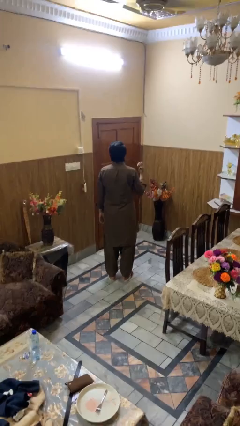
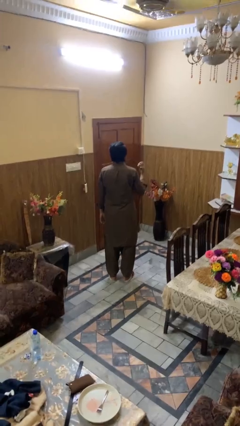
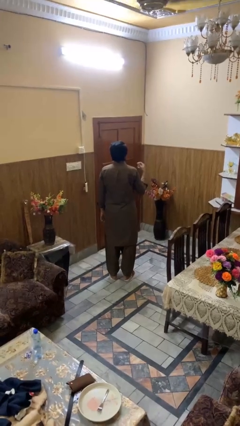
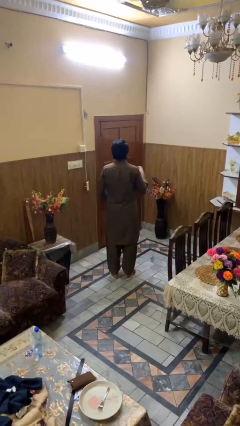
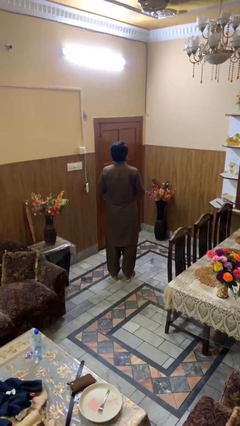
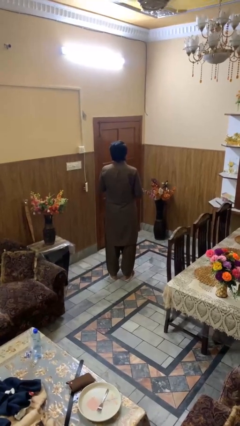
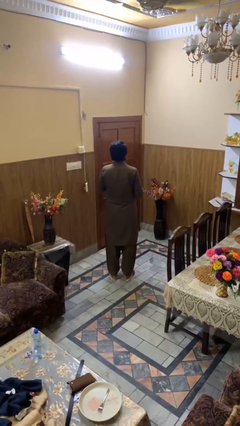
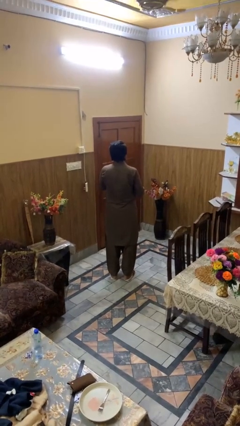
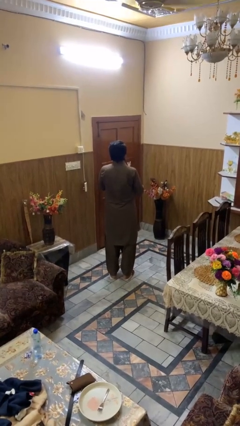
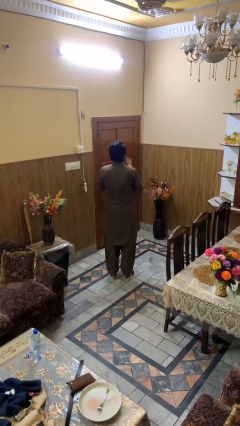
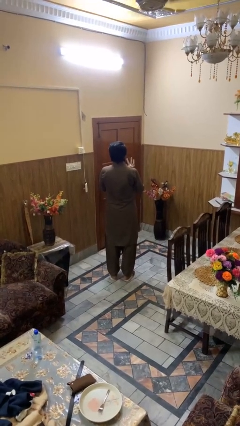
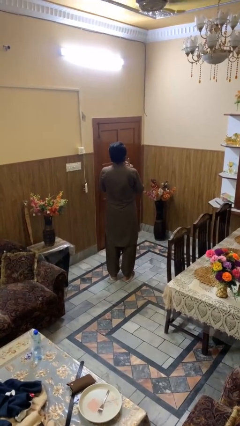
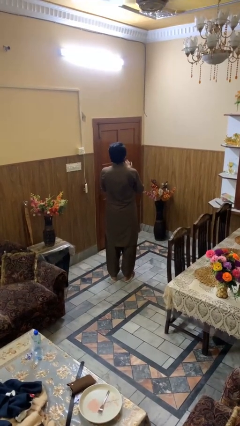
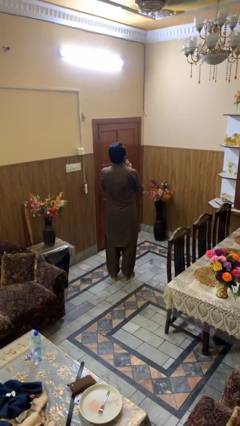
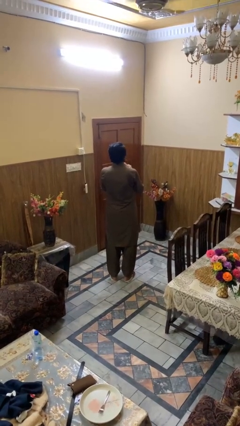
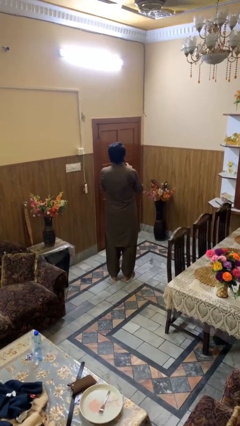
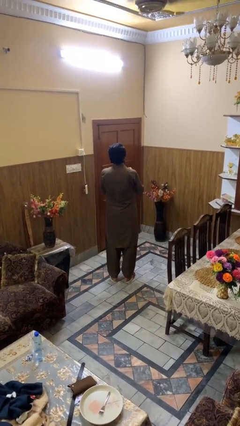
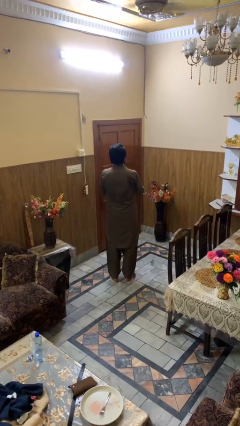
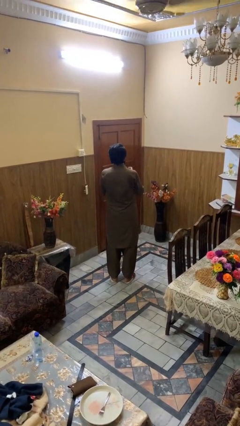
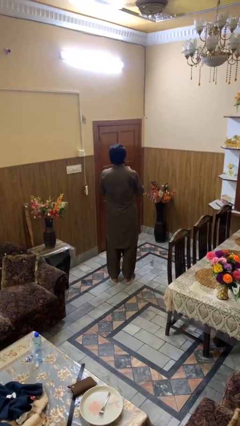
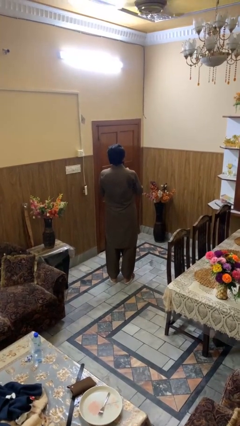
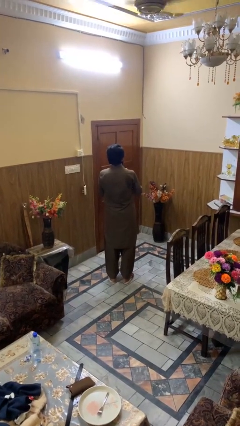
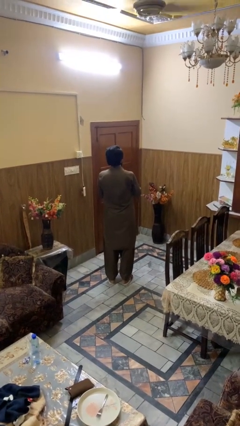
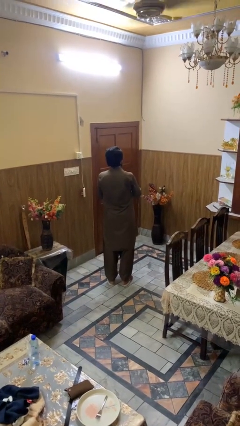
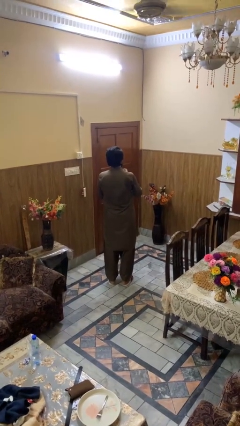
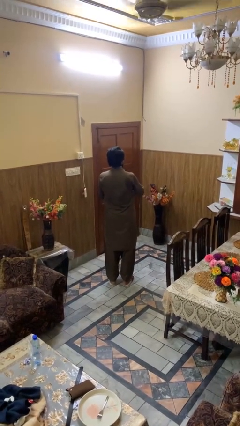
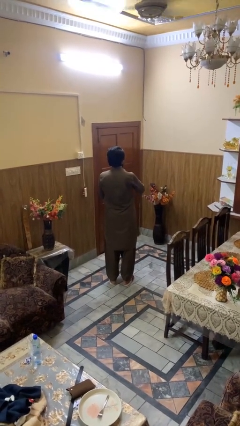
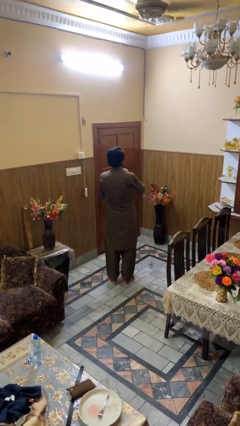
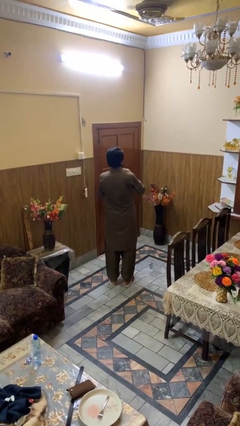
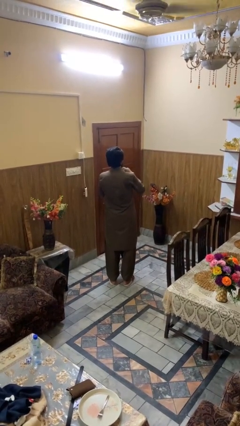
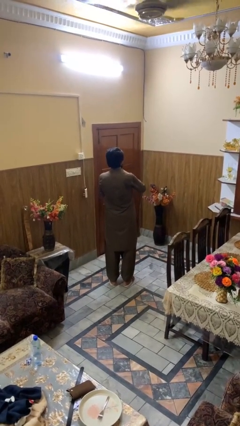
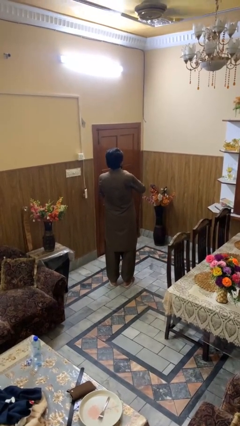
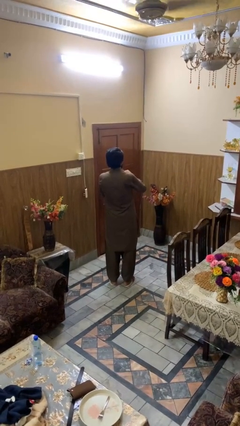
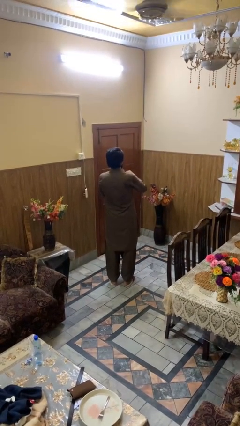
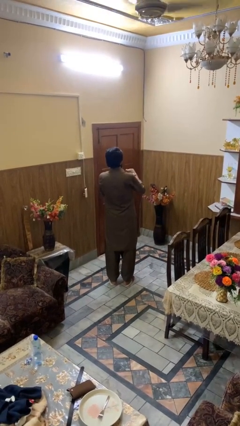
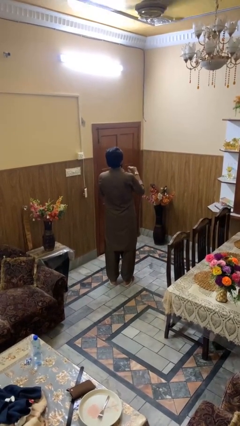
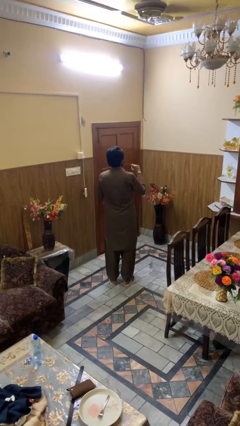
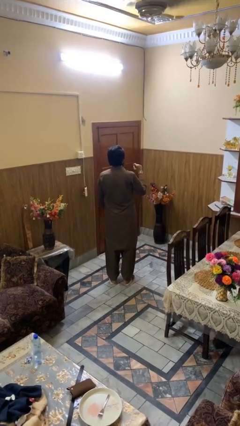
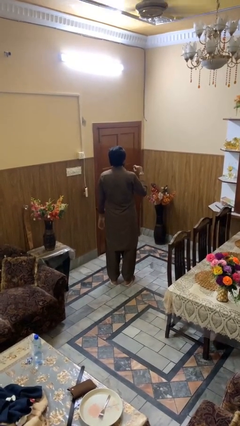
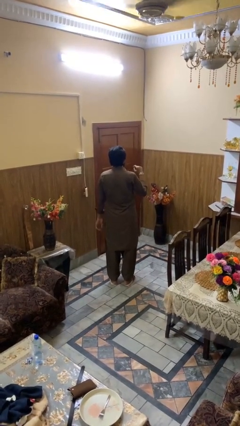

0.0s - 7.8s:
person puts on wristwatch

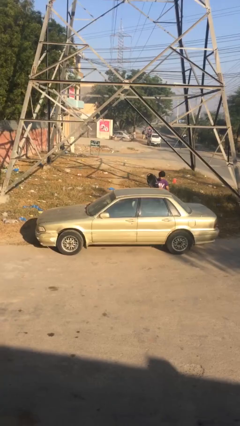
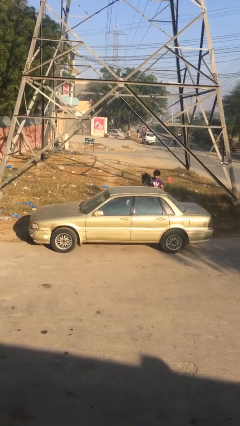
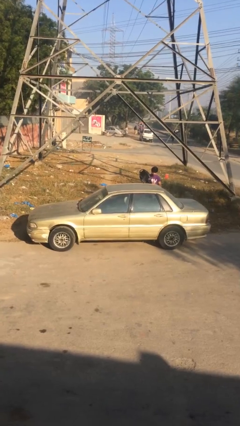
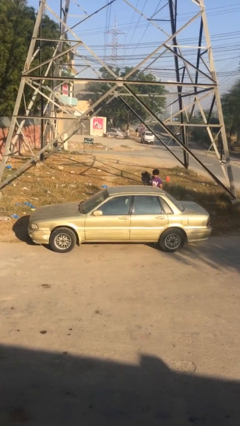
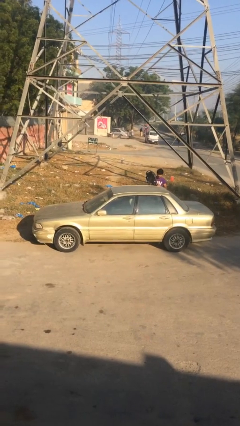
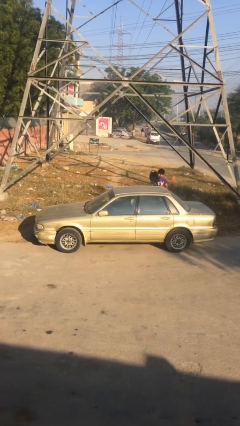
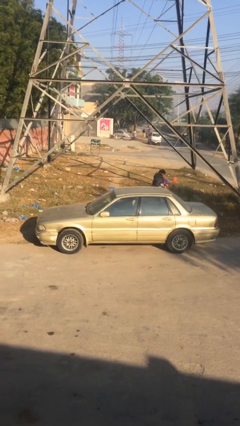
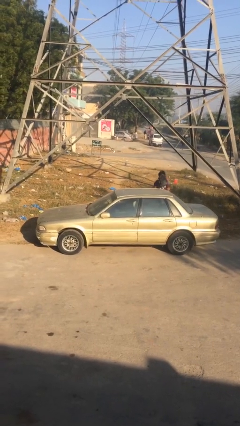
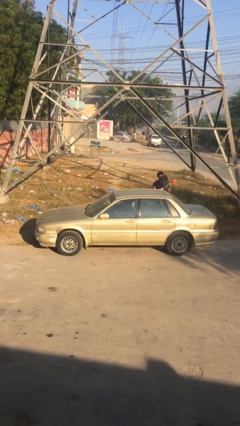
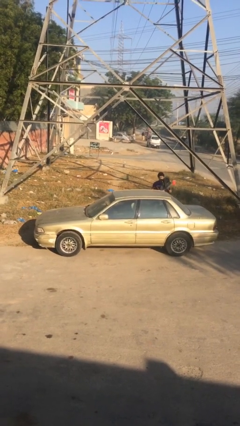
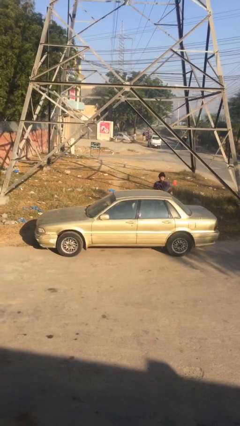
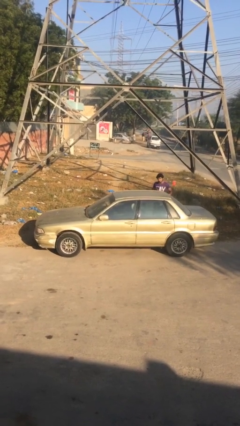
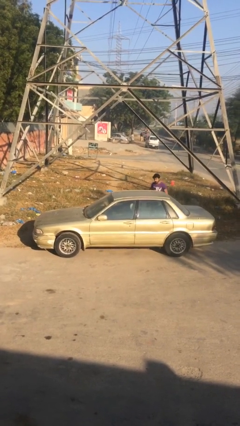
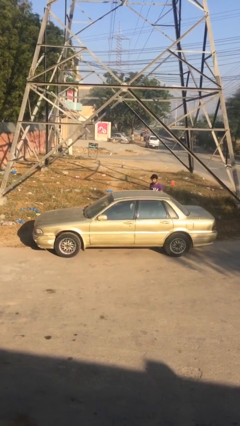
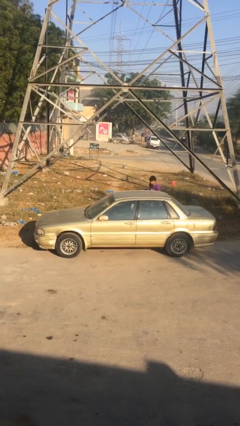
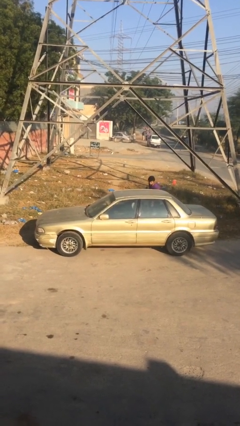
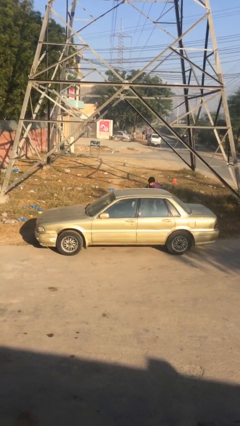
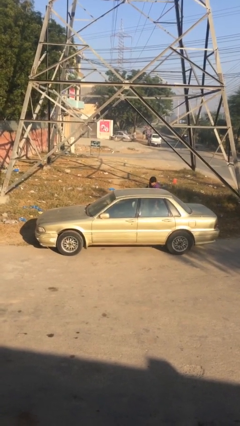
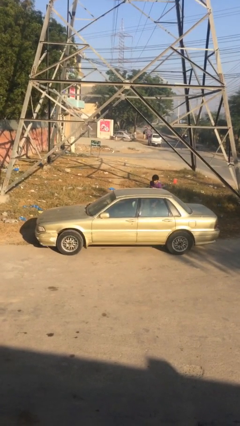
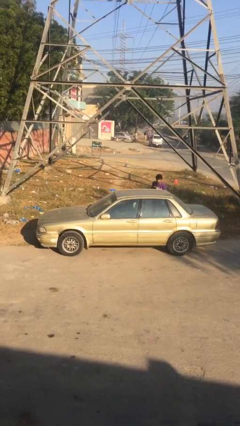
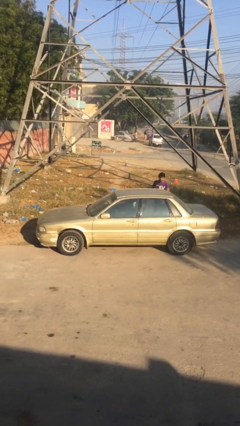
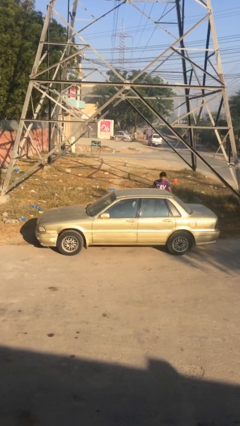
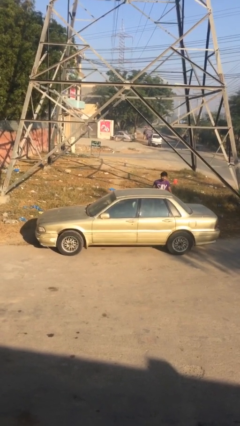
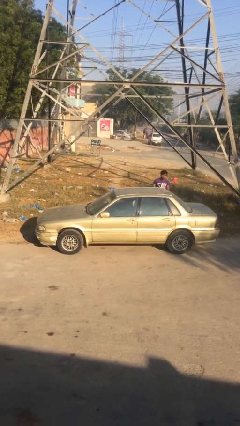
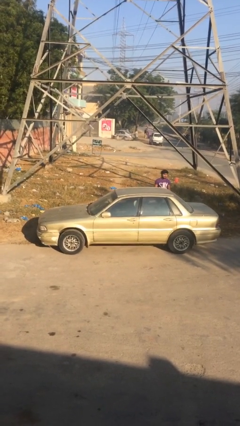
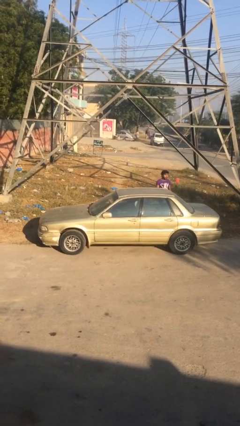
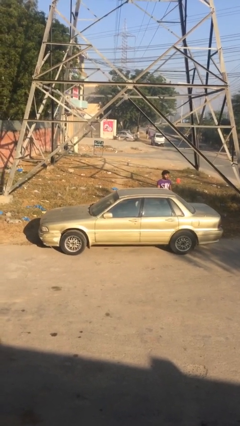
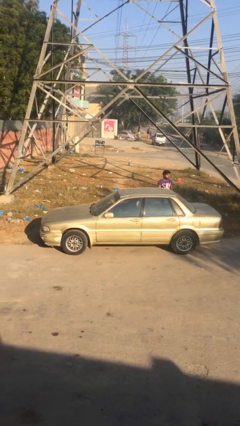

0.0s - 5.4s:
person loads car

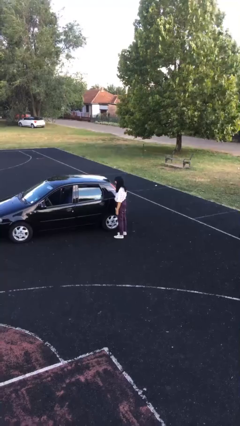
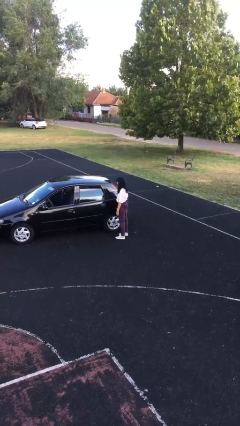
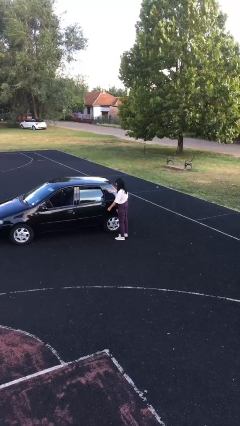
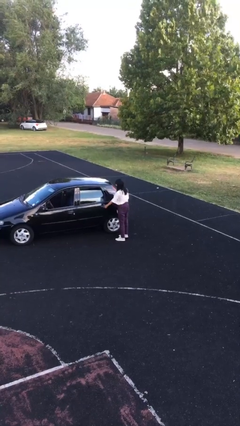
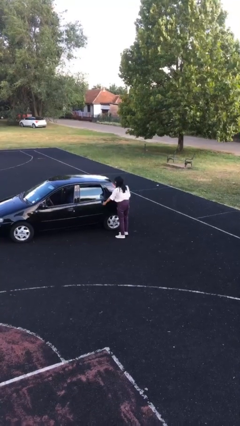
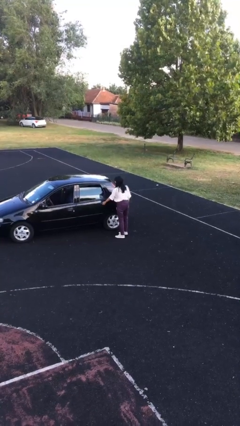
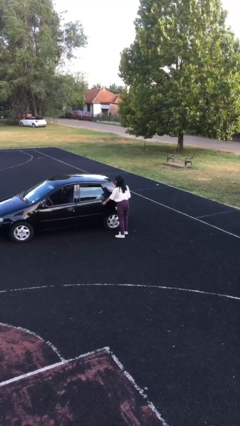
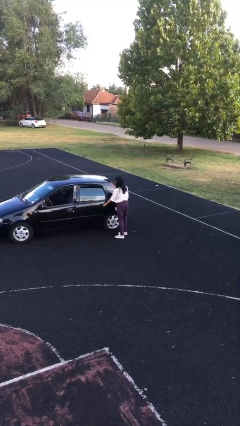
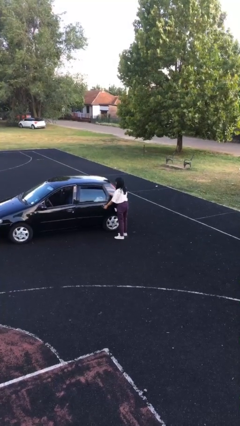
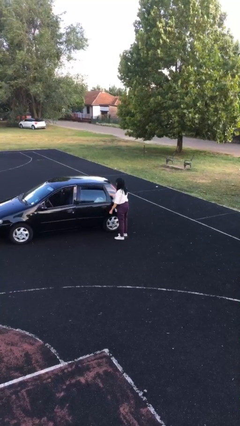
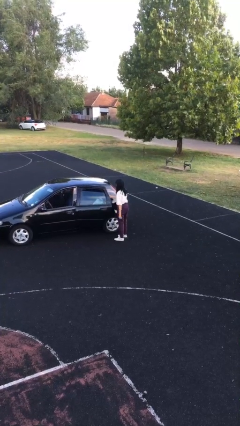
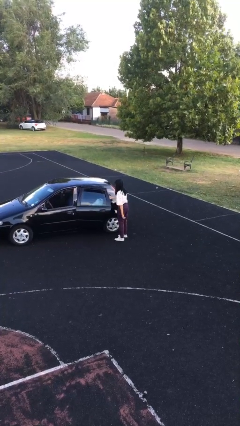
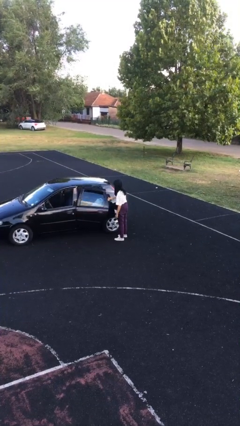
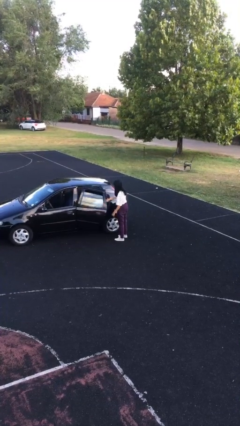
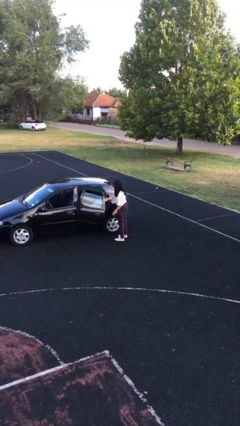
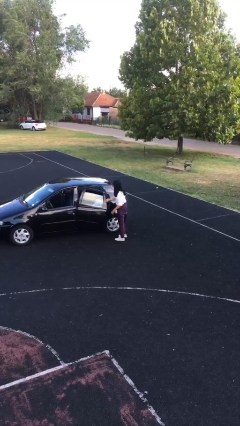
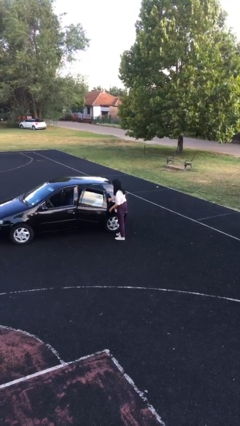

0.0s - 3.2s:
person opens car door

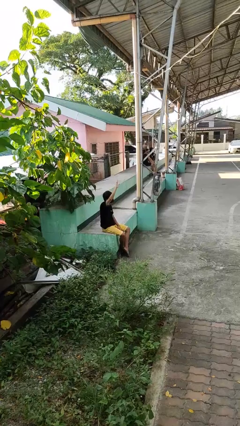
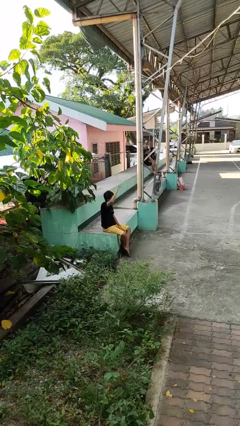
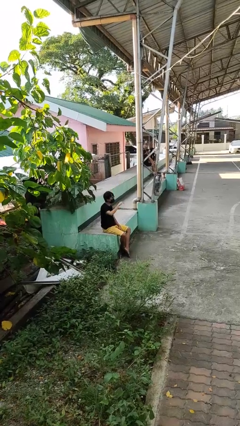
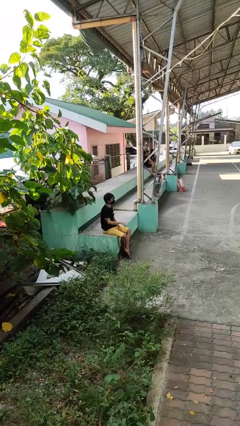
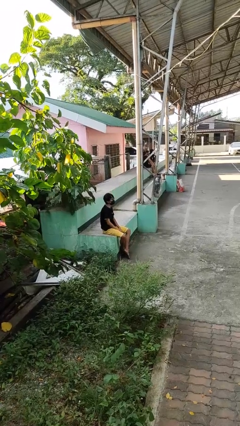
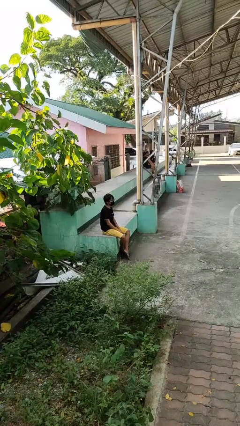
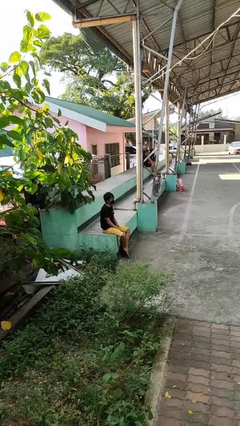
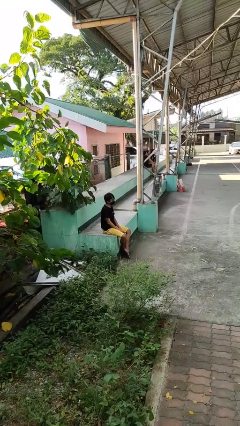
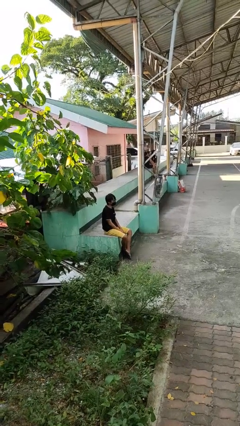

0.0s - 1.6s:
person gestures lower hand
